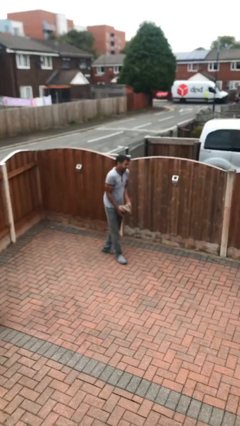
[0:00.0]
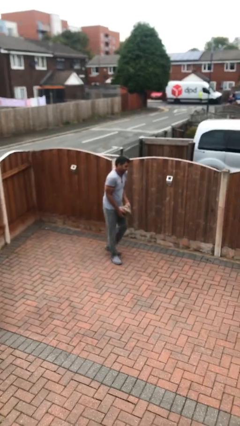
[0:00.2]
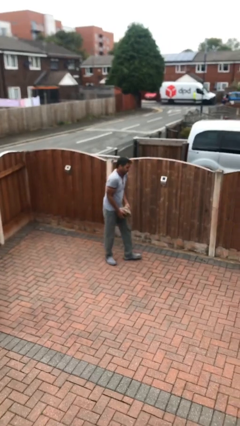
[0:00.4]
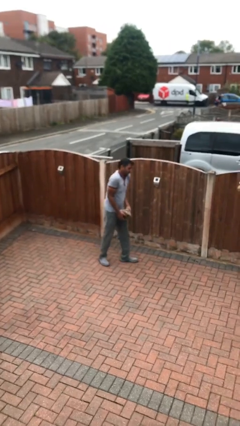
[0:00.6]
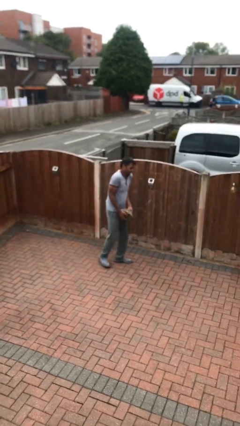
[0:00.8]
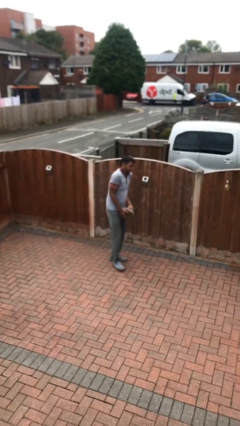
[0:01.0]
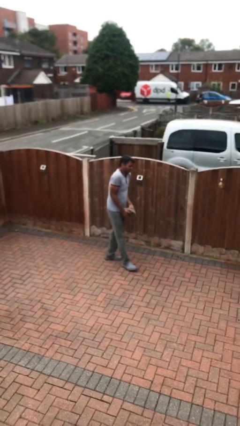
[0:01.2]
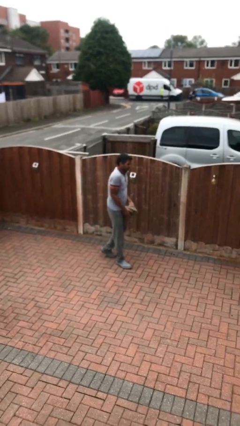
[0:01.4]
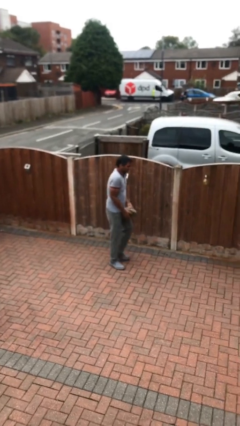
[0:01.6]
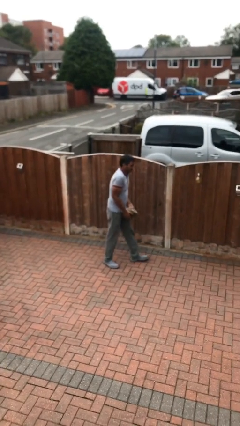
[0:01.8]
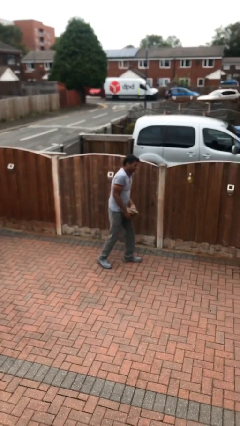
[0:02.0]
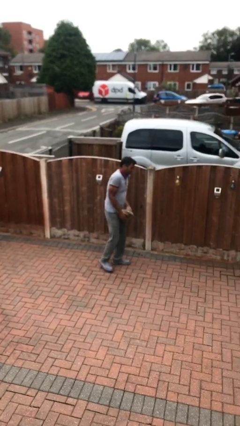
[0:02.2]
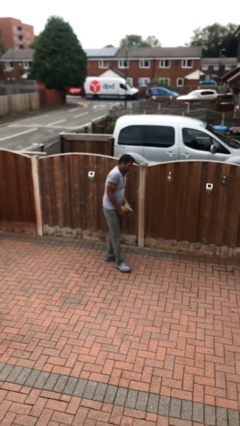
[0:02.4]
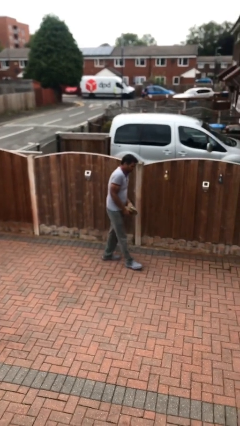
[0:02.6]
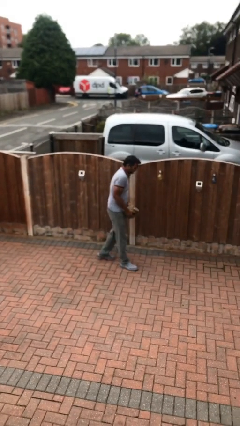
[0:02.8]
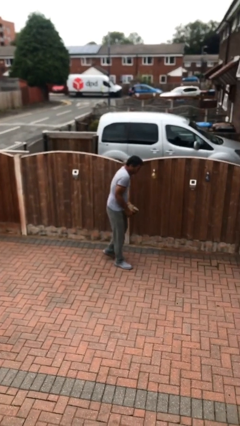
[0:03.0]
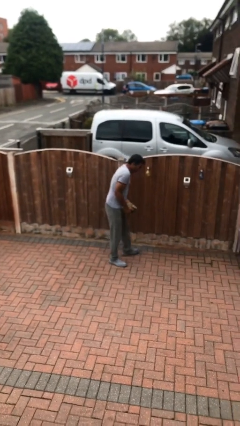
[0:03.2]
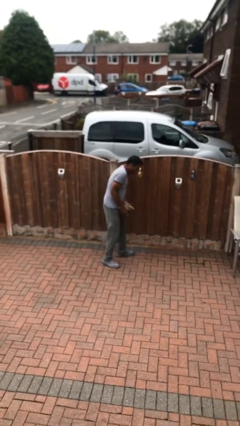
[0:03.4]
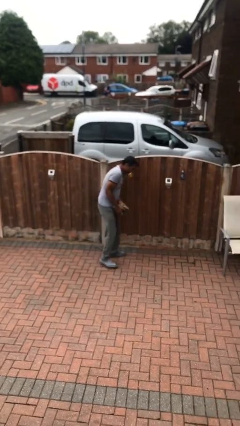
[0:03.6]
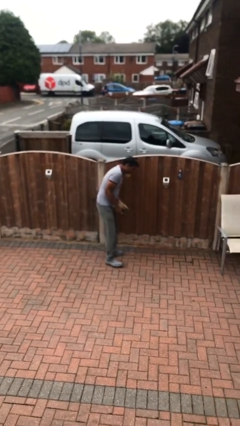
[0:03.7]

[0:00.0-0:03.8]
person carries heavy object

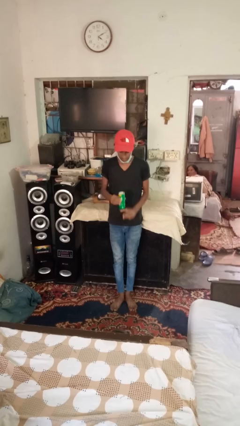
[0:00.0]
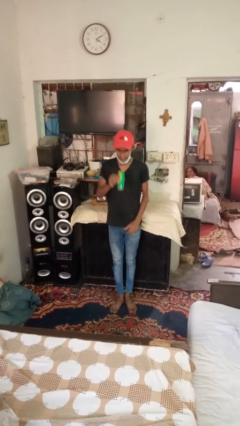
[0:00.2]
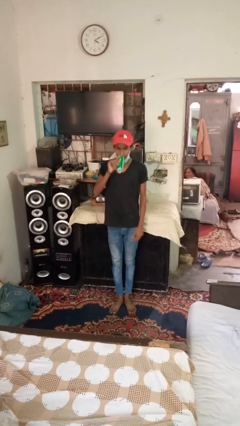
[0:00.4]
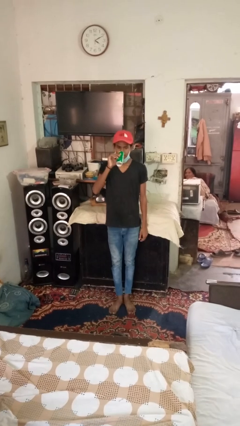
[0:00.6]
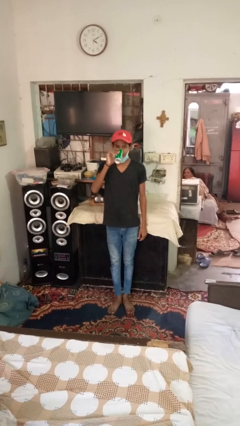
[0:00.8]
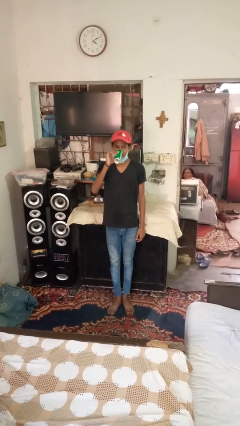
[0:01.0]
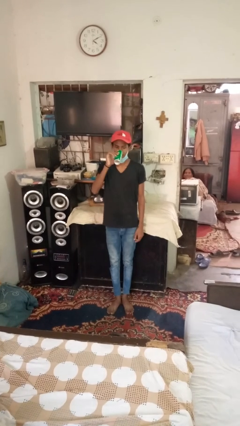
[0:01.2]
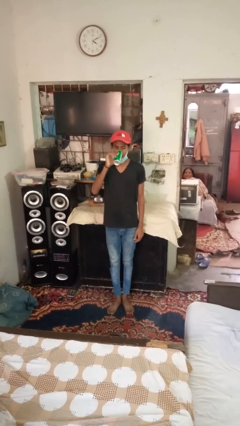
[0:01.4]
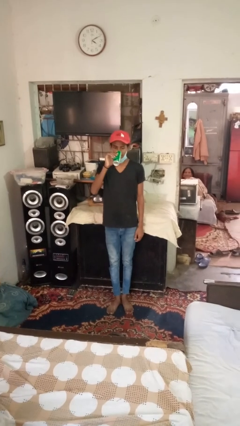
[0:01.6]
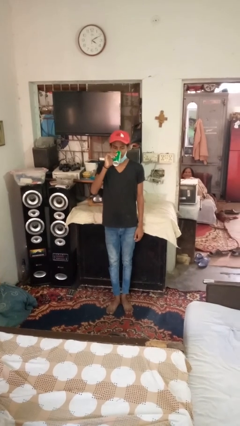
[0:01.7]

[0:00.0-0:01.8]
person drinks from beverage can

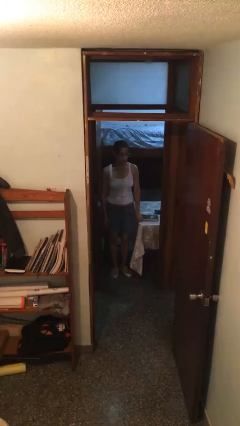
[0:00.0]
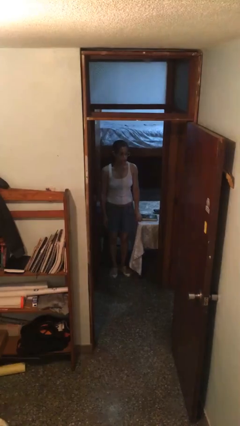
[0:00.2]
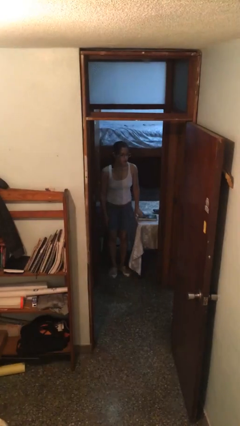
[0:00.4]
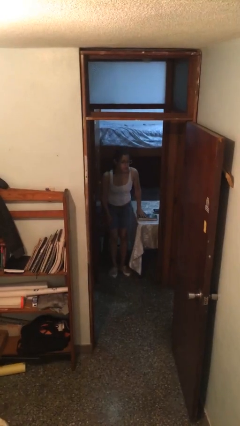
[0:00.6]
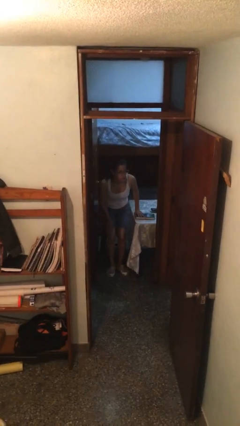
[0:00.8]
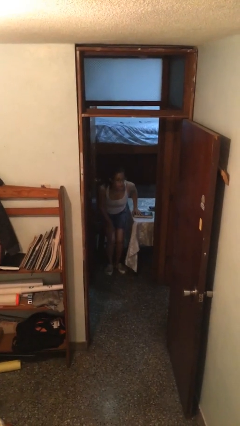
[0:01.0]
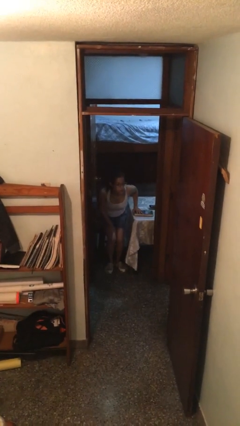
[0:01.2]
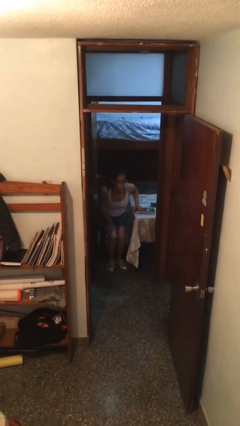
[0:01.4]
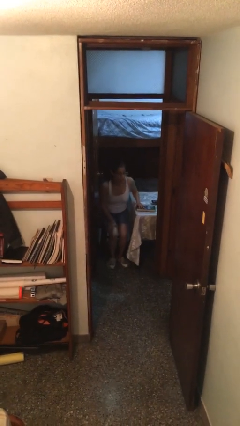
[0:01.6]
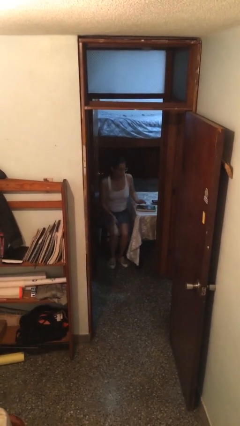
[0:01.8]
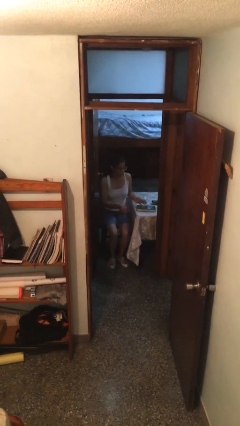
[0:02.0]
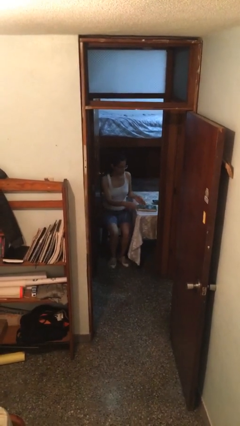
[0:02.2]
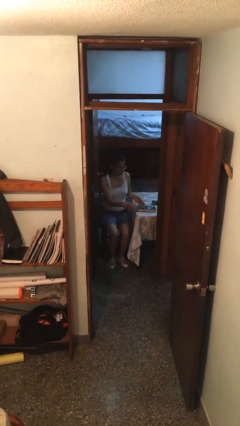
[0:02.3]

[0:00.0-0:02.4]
person sits down

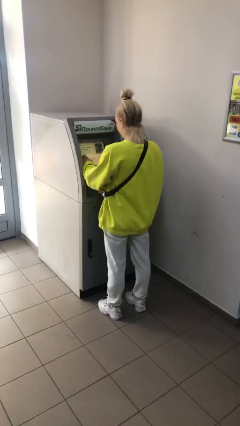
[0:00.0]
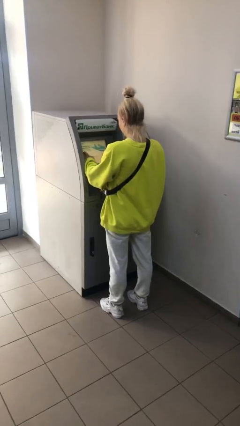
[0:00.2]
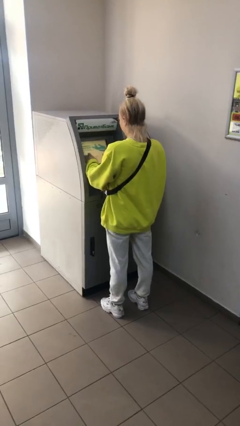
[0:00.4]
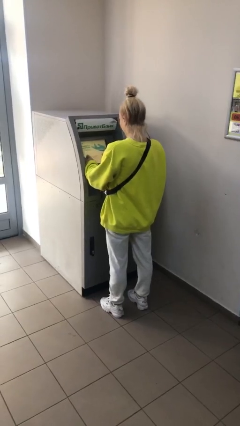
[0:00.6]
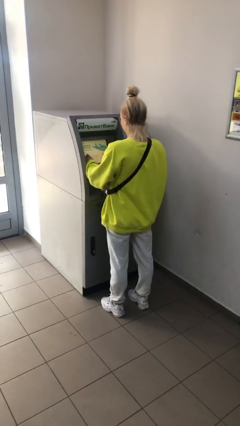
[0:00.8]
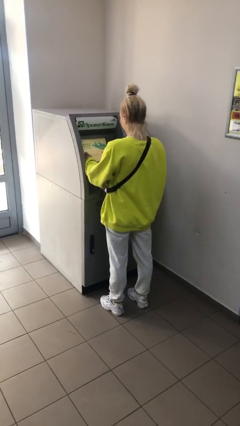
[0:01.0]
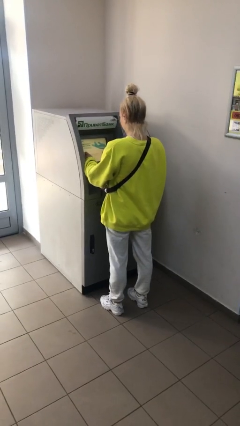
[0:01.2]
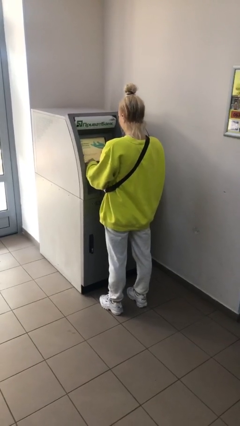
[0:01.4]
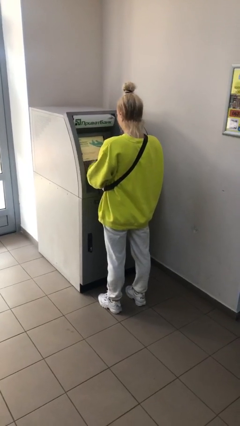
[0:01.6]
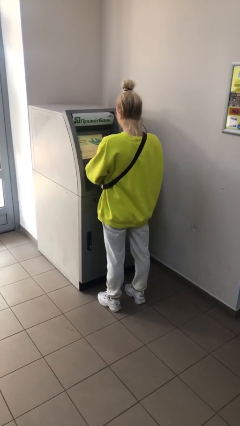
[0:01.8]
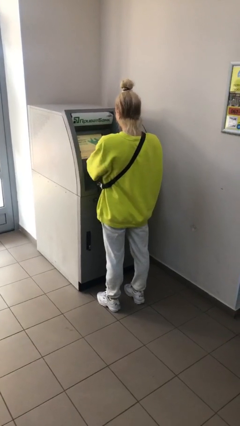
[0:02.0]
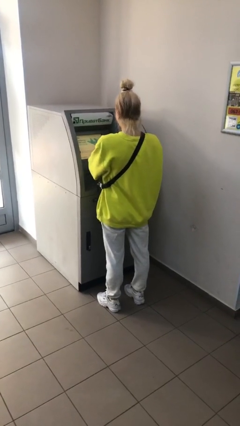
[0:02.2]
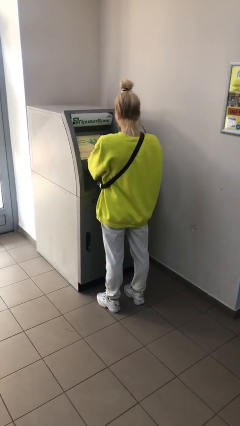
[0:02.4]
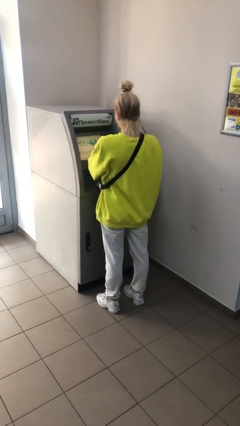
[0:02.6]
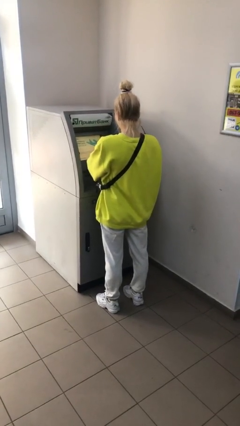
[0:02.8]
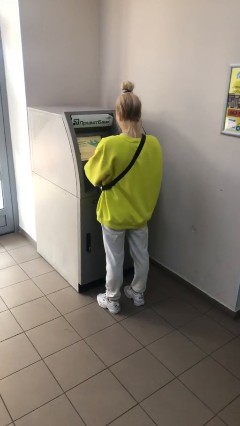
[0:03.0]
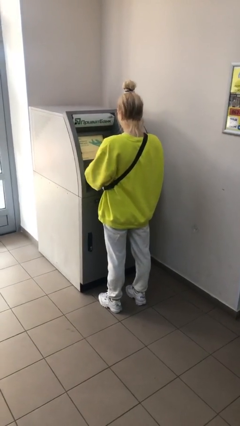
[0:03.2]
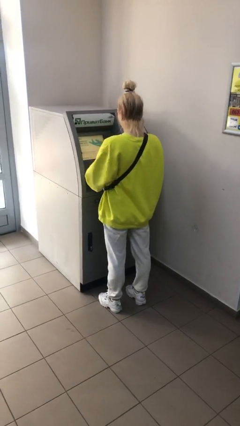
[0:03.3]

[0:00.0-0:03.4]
person purchases from machine

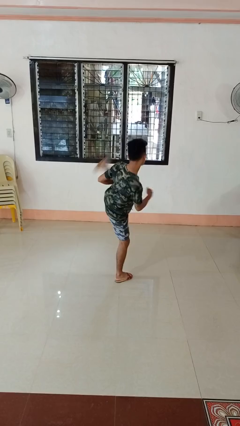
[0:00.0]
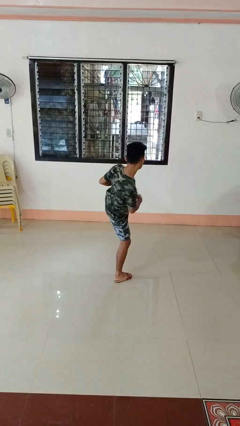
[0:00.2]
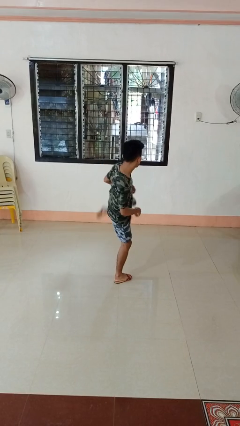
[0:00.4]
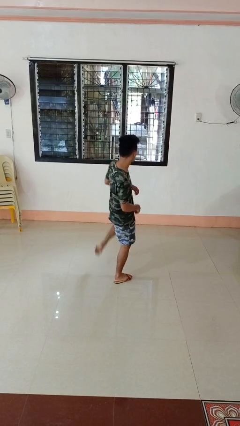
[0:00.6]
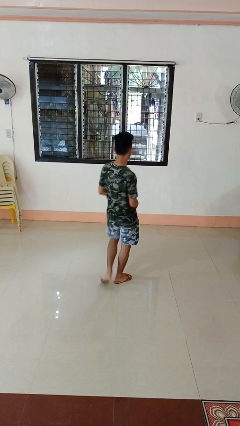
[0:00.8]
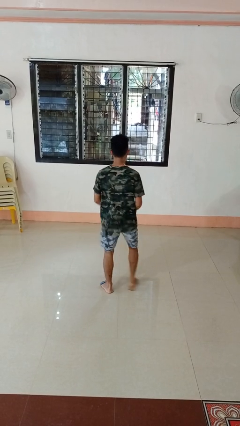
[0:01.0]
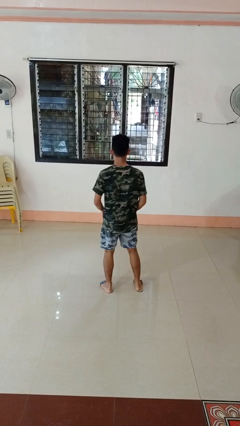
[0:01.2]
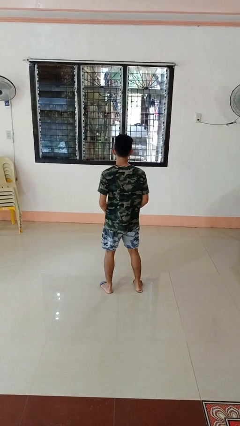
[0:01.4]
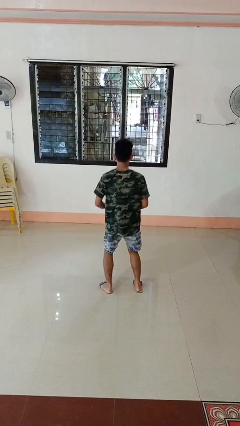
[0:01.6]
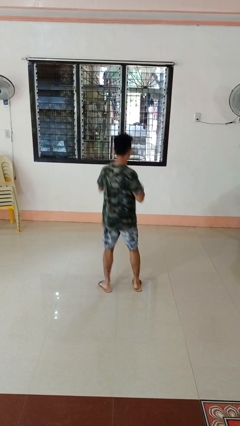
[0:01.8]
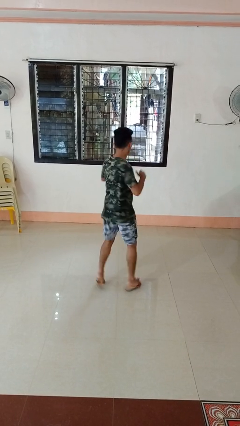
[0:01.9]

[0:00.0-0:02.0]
person karate kicks

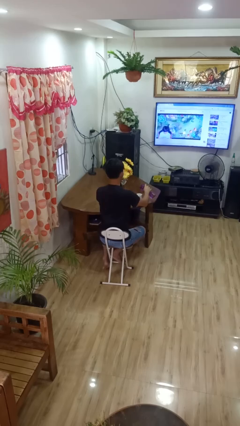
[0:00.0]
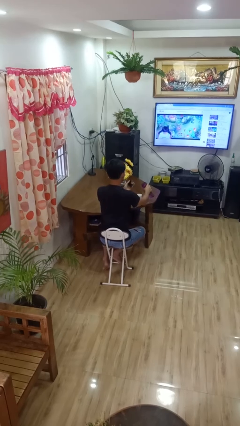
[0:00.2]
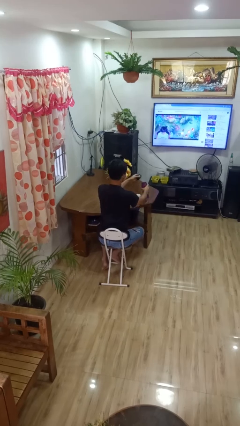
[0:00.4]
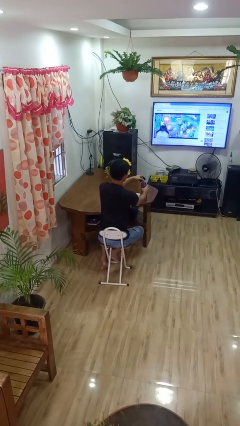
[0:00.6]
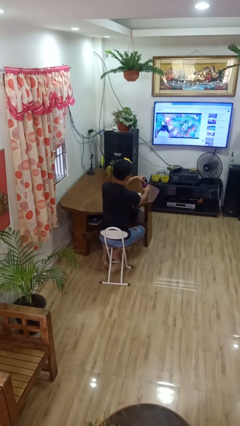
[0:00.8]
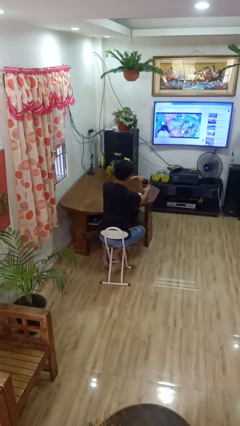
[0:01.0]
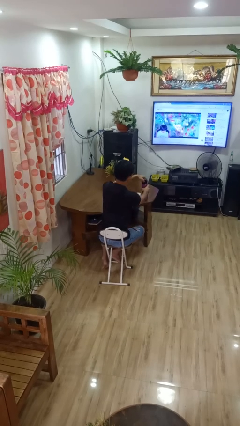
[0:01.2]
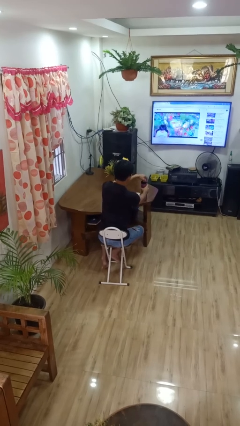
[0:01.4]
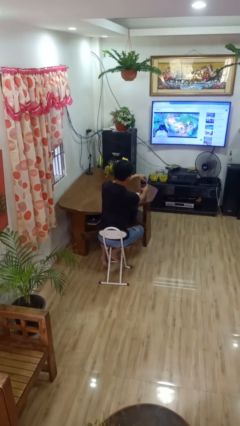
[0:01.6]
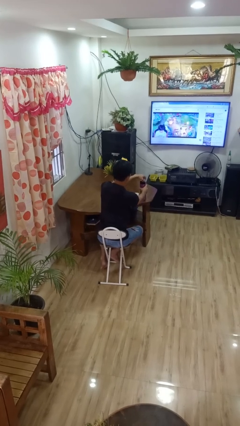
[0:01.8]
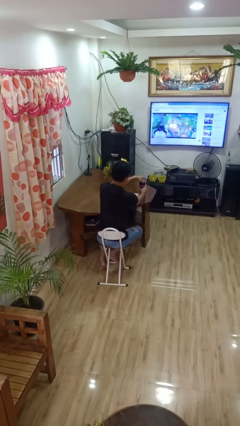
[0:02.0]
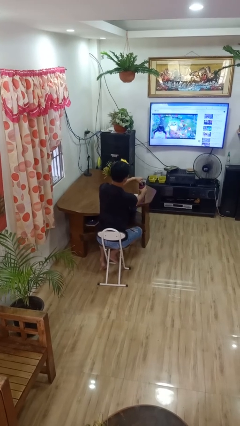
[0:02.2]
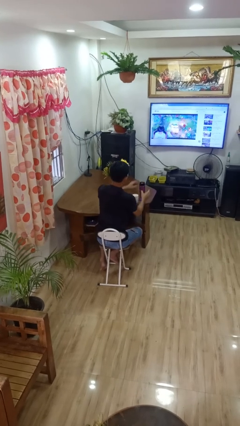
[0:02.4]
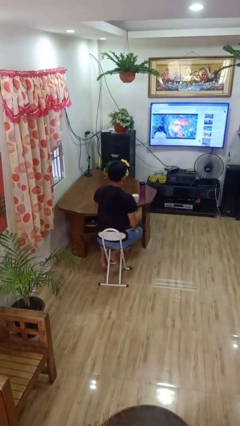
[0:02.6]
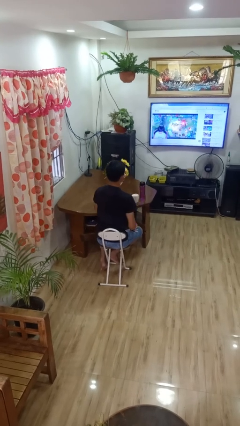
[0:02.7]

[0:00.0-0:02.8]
person screws lid to bottle

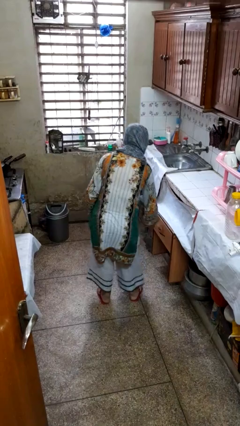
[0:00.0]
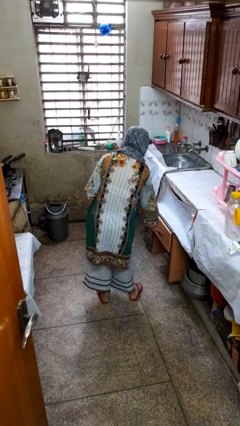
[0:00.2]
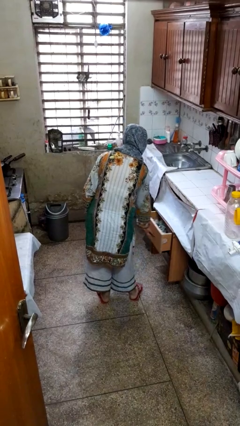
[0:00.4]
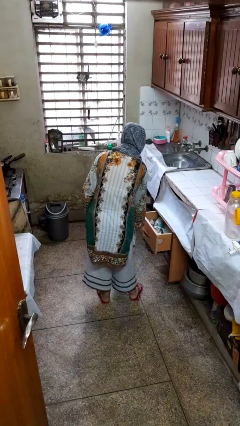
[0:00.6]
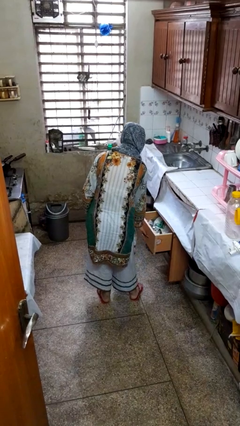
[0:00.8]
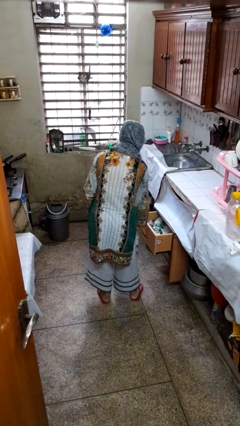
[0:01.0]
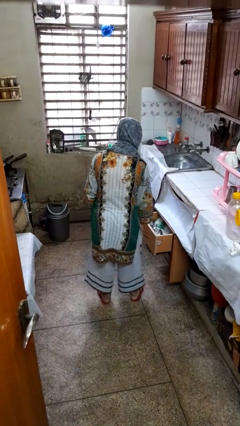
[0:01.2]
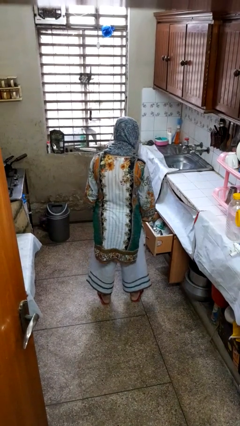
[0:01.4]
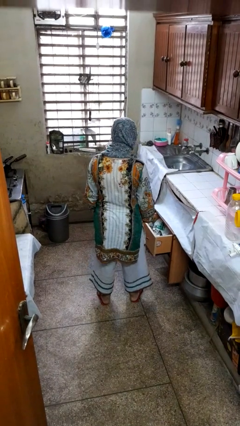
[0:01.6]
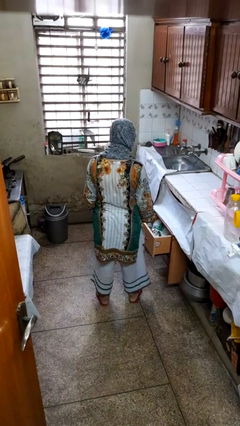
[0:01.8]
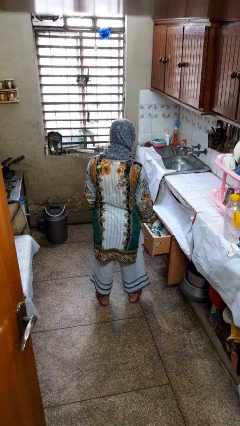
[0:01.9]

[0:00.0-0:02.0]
person opens kitchen drawer
